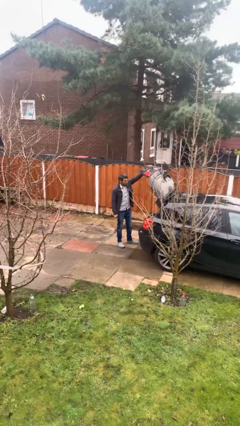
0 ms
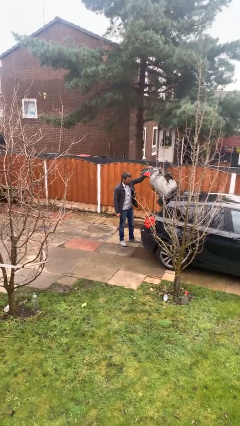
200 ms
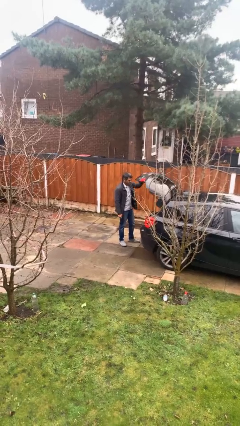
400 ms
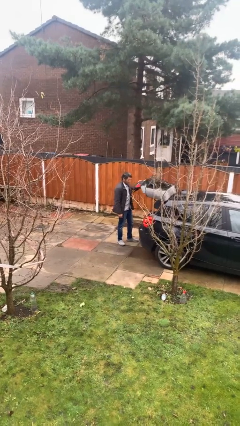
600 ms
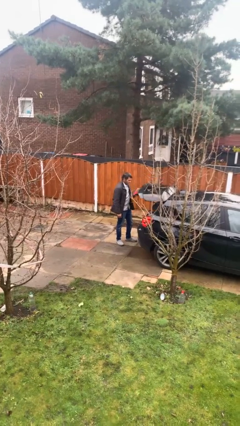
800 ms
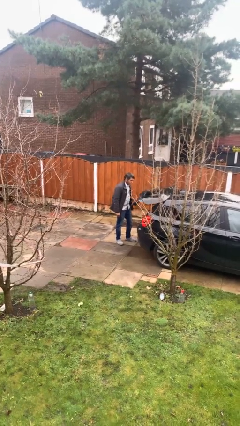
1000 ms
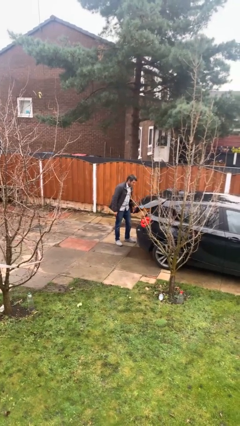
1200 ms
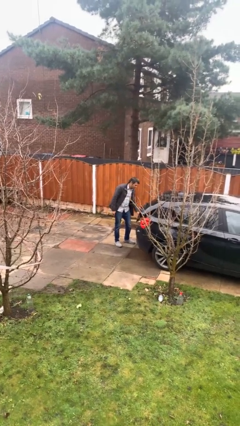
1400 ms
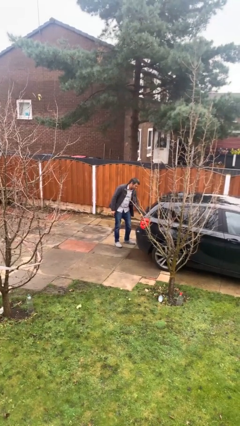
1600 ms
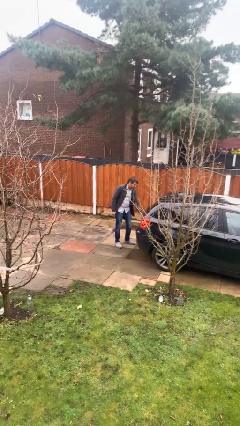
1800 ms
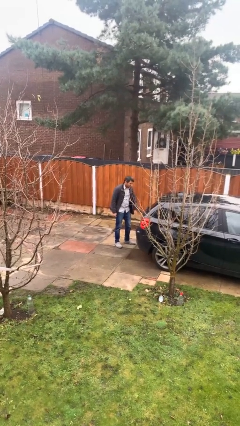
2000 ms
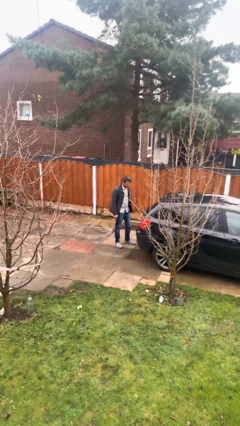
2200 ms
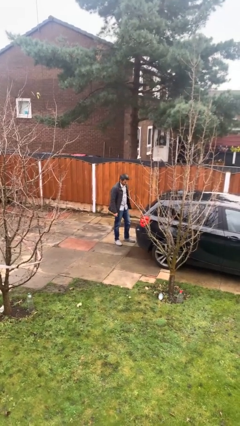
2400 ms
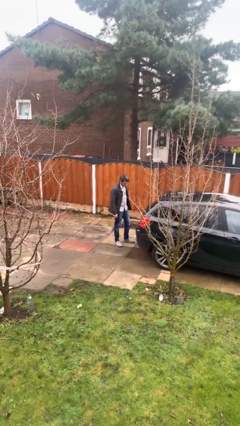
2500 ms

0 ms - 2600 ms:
person closes car trunk

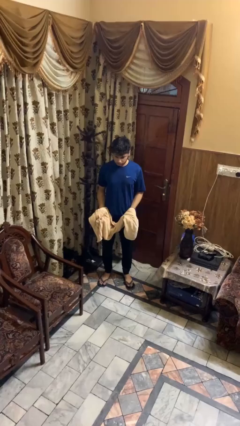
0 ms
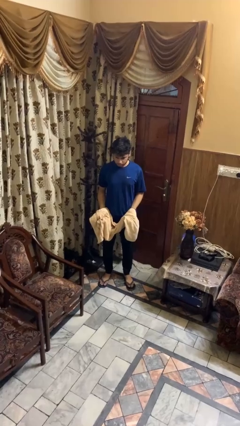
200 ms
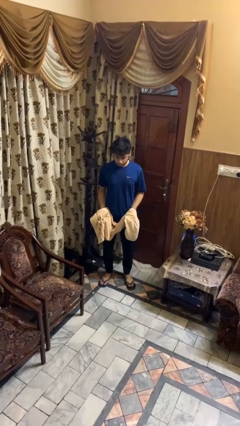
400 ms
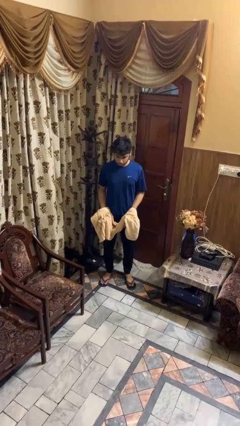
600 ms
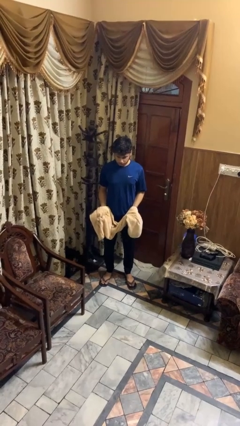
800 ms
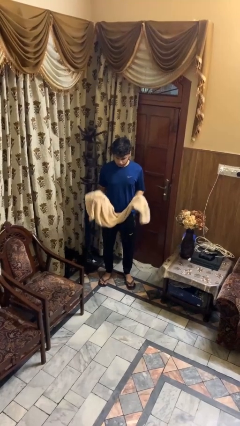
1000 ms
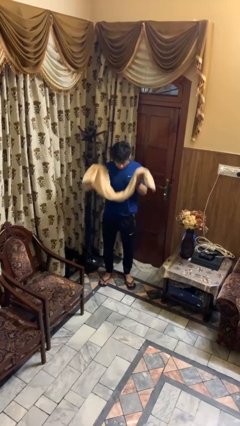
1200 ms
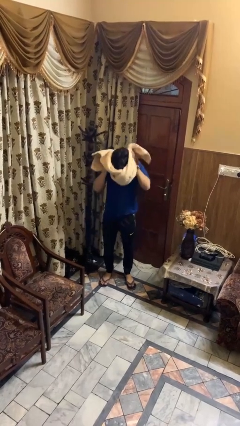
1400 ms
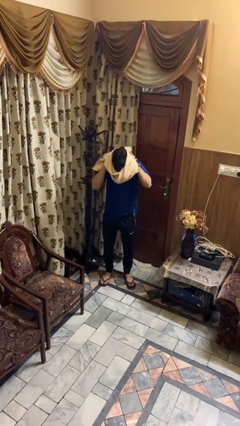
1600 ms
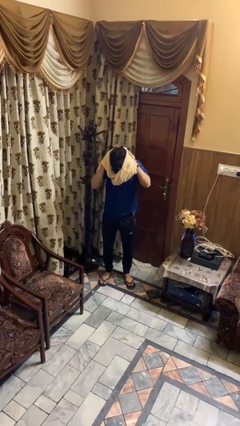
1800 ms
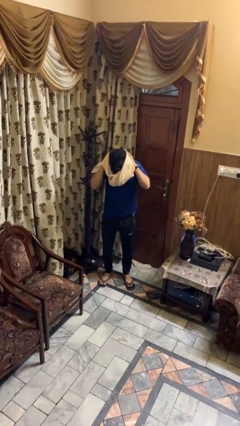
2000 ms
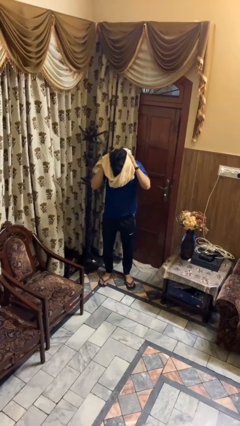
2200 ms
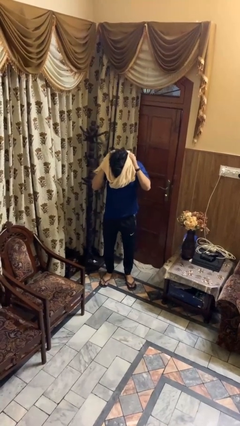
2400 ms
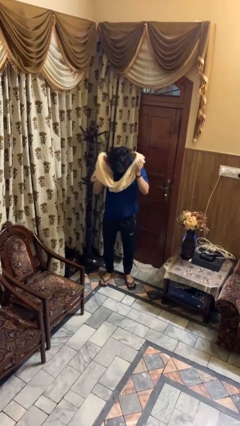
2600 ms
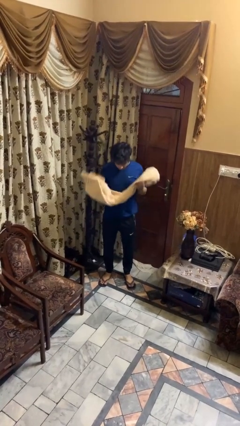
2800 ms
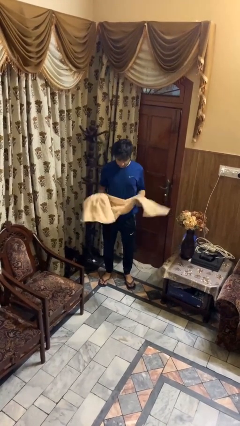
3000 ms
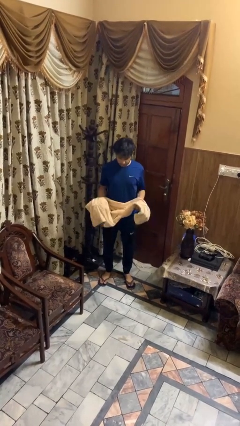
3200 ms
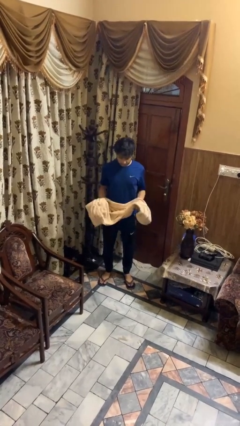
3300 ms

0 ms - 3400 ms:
person dries hair with towel

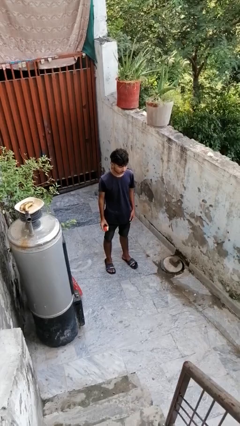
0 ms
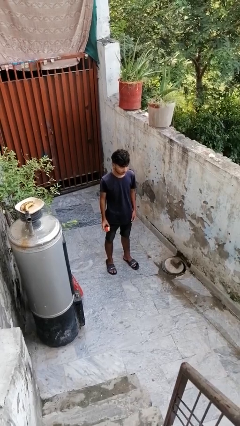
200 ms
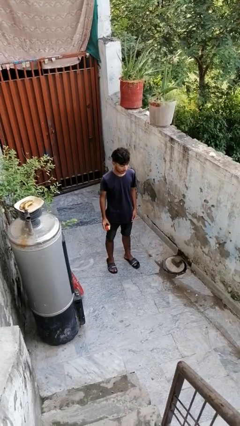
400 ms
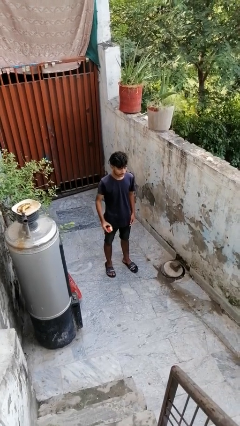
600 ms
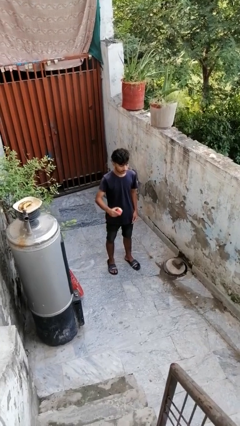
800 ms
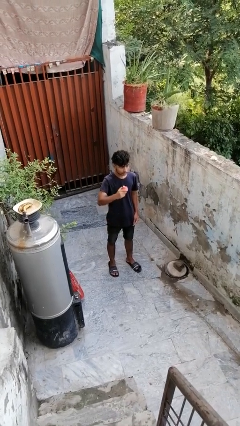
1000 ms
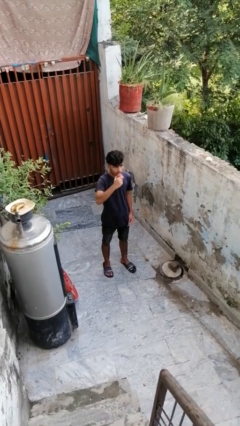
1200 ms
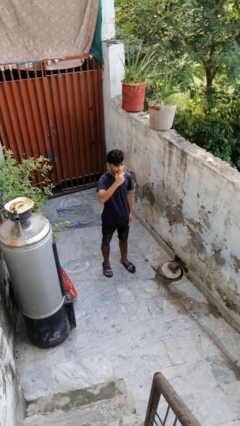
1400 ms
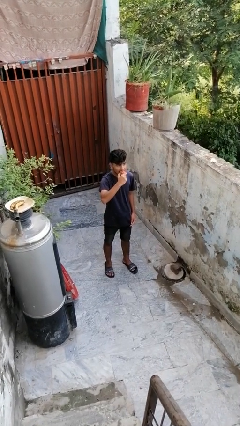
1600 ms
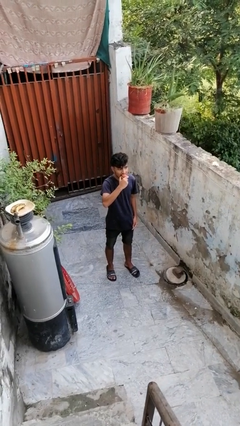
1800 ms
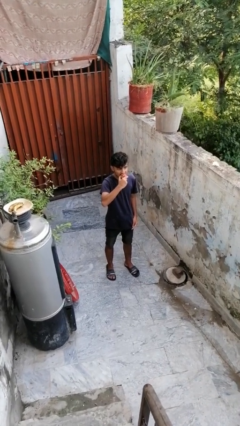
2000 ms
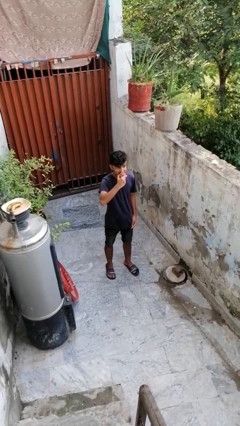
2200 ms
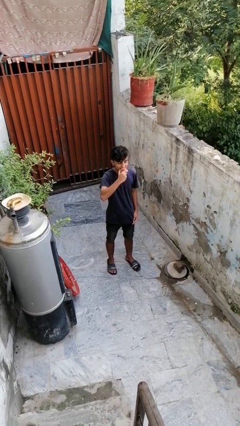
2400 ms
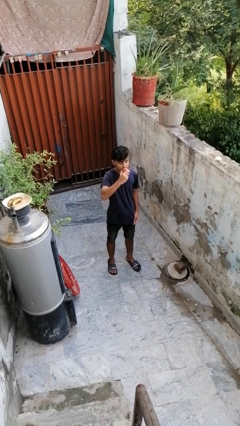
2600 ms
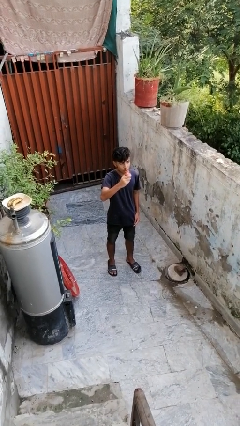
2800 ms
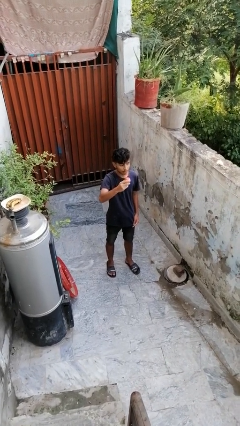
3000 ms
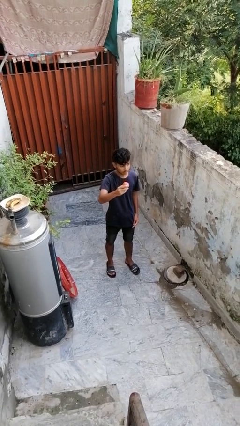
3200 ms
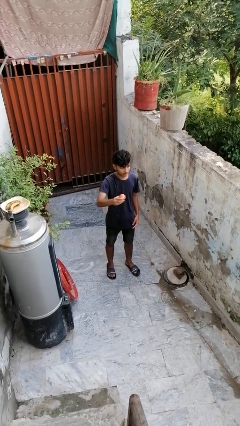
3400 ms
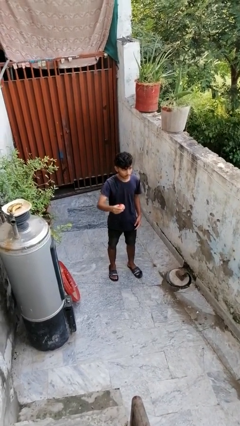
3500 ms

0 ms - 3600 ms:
person eats apple

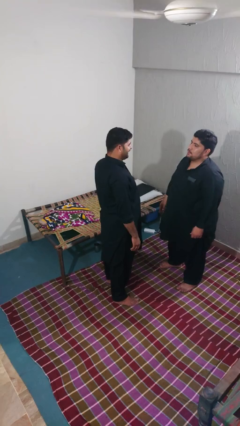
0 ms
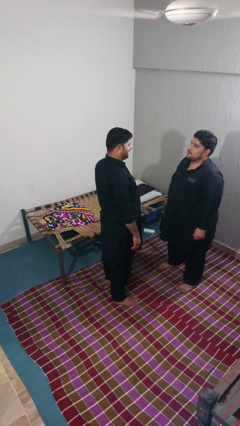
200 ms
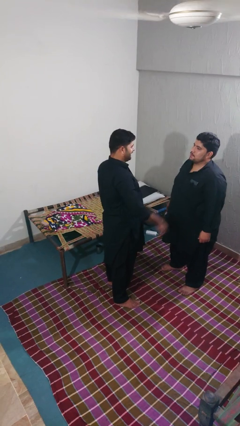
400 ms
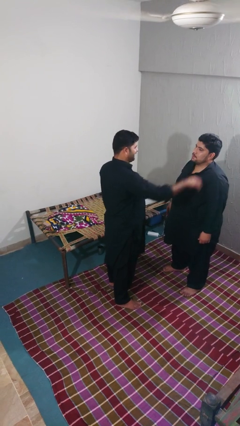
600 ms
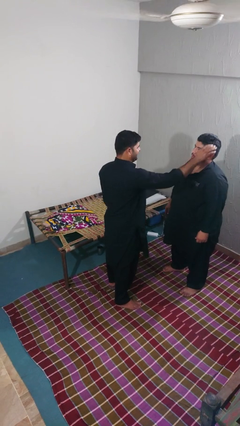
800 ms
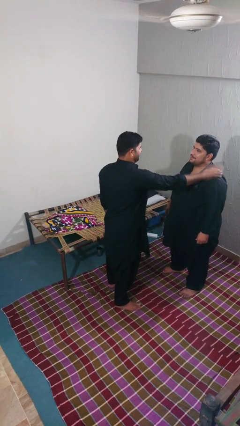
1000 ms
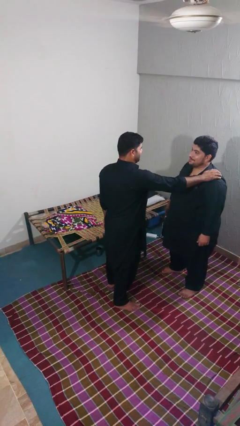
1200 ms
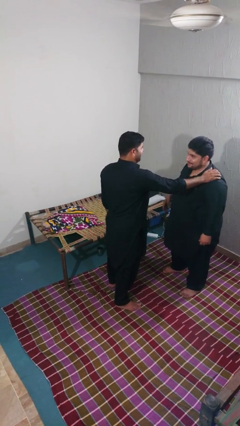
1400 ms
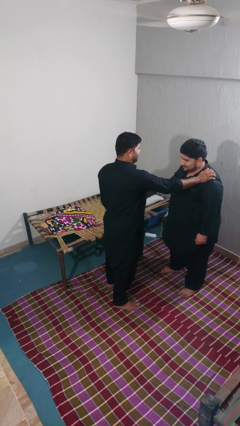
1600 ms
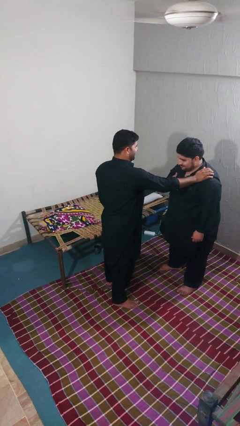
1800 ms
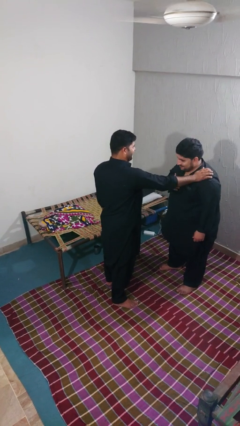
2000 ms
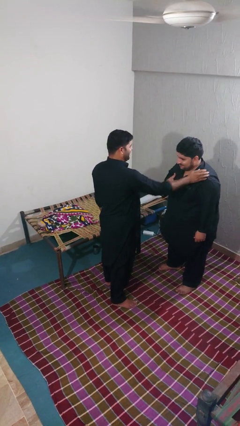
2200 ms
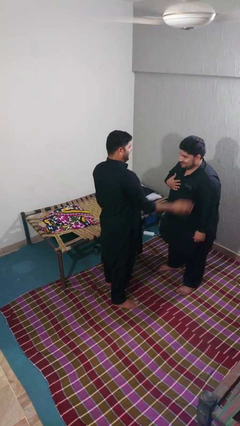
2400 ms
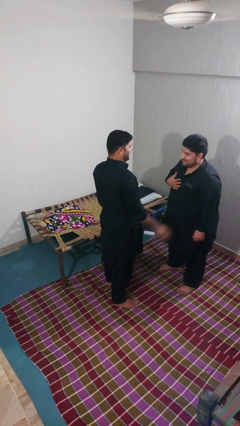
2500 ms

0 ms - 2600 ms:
person pounds shoulders of person

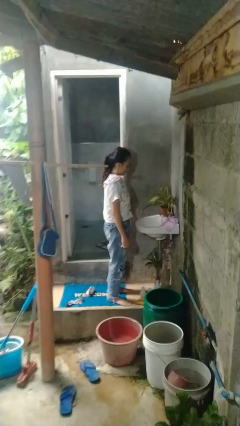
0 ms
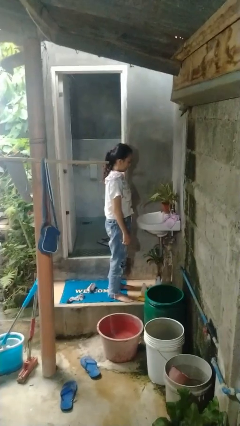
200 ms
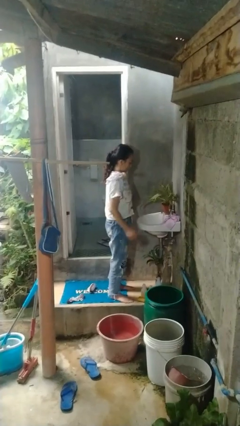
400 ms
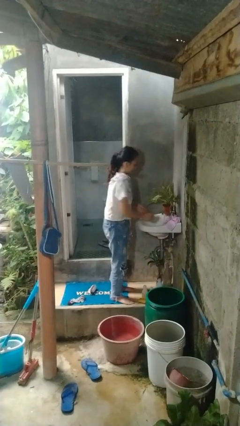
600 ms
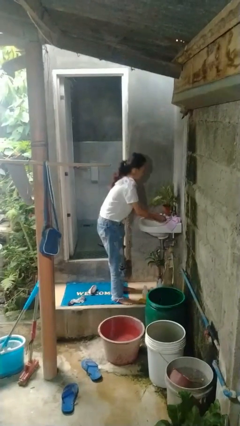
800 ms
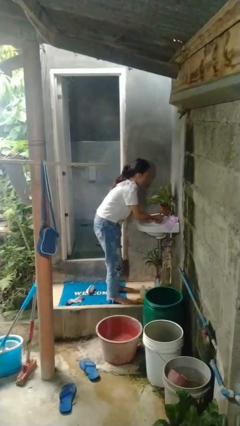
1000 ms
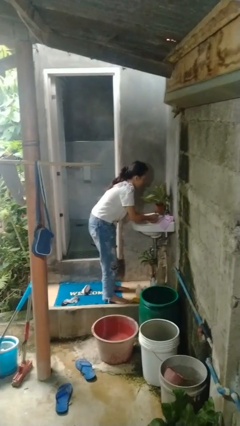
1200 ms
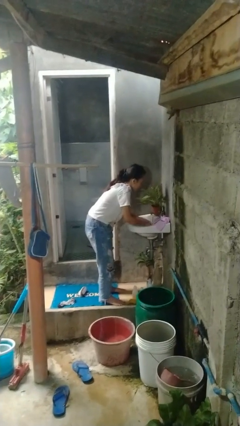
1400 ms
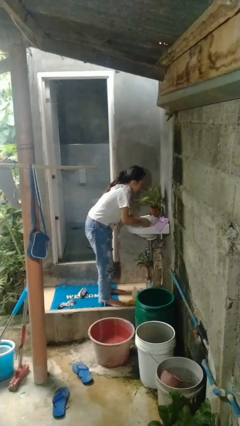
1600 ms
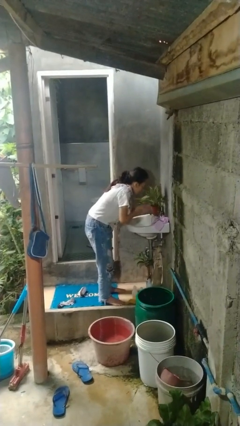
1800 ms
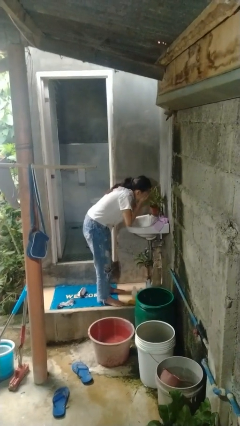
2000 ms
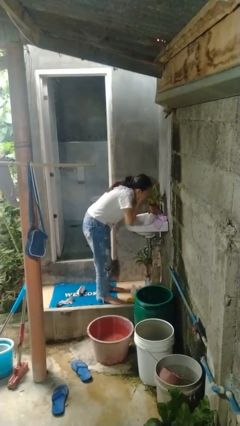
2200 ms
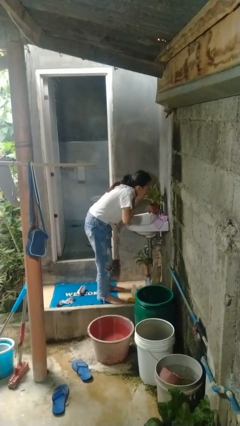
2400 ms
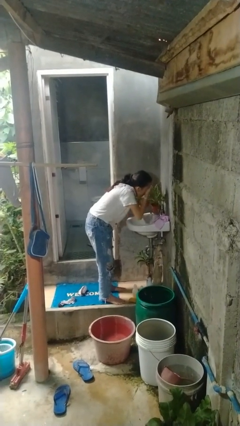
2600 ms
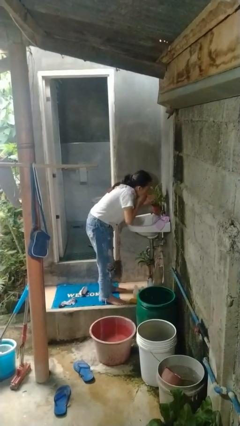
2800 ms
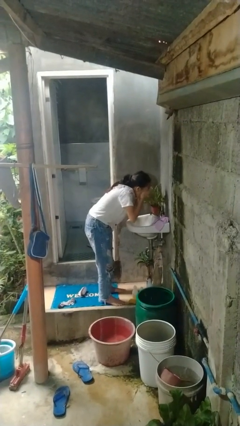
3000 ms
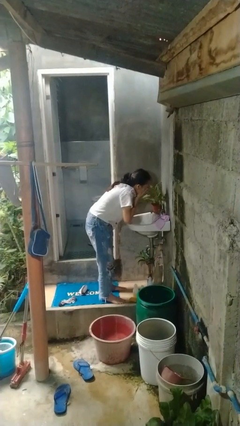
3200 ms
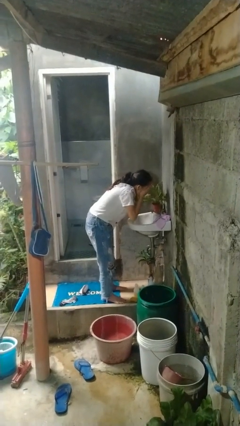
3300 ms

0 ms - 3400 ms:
person washes face

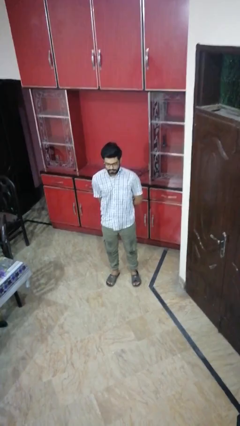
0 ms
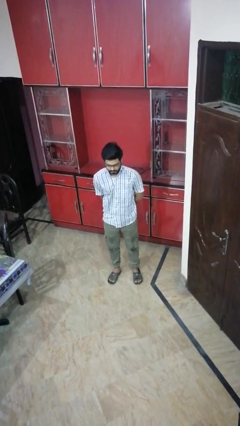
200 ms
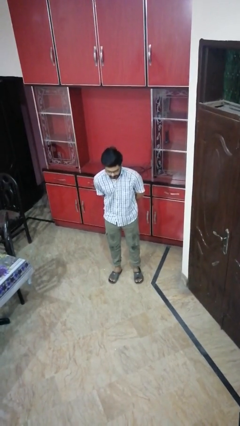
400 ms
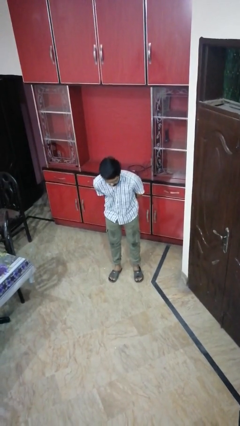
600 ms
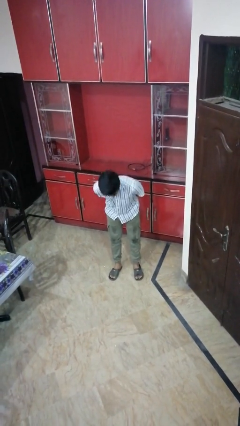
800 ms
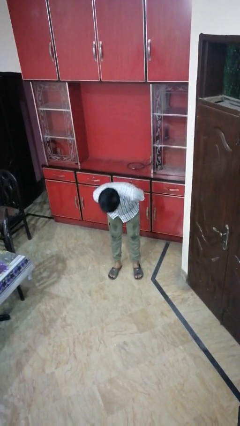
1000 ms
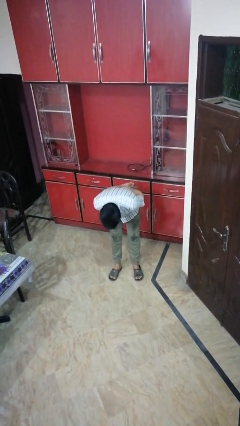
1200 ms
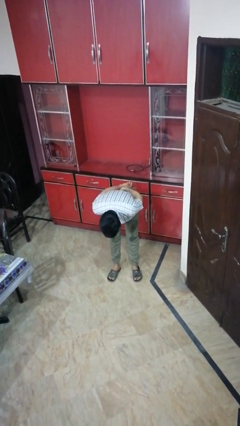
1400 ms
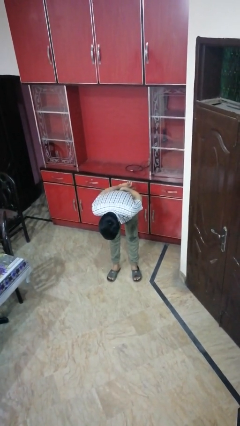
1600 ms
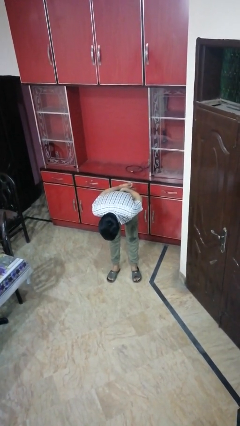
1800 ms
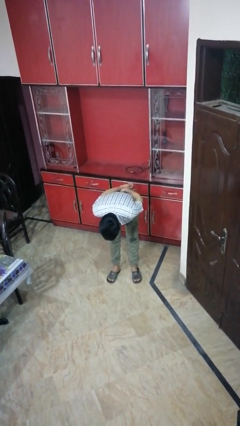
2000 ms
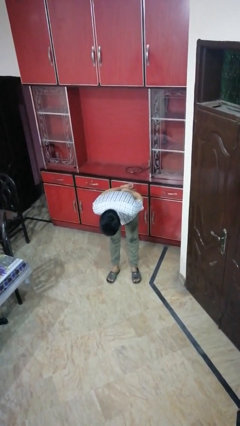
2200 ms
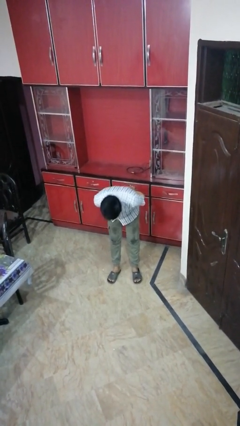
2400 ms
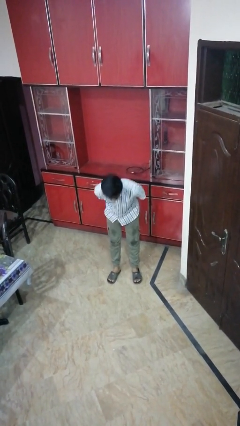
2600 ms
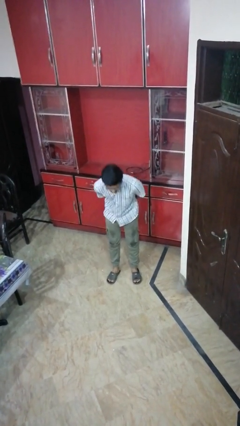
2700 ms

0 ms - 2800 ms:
person bows
